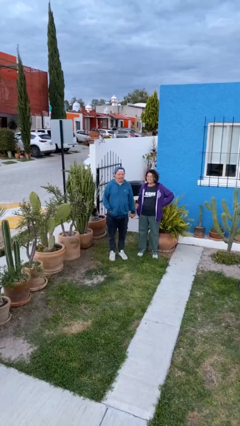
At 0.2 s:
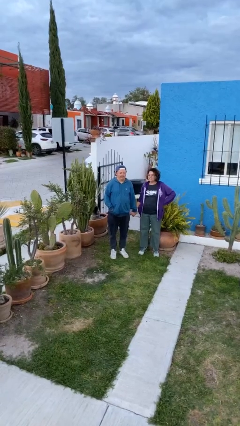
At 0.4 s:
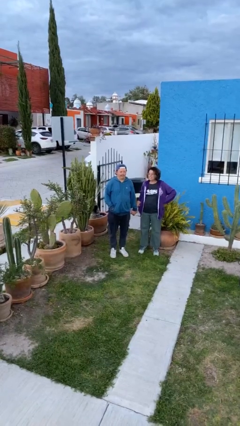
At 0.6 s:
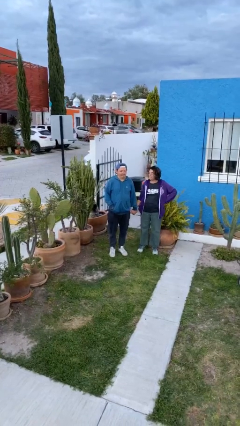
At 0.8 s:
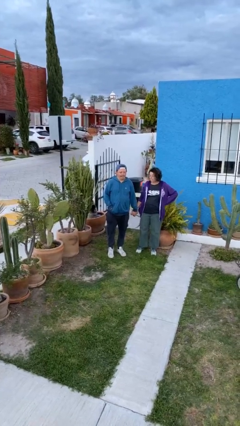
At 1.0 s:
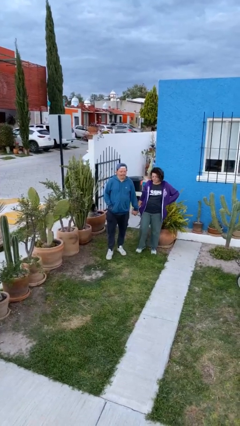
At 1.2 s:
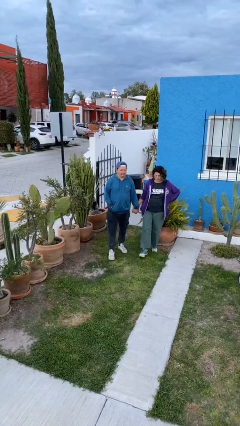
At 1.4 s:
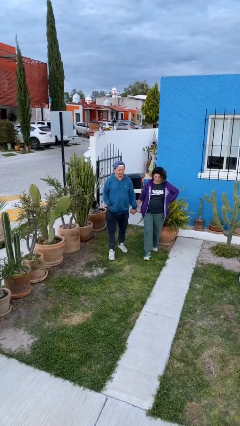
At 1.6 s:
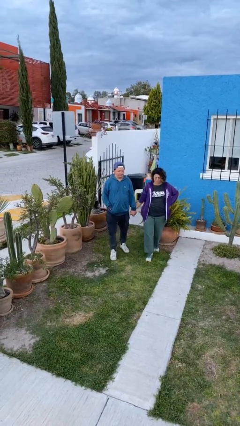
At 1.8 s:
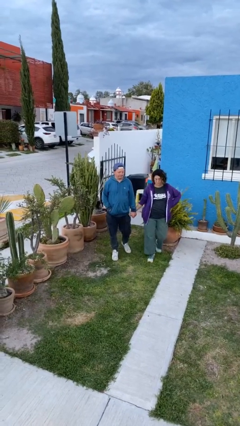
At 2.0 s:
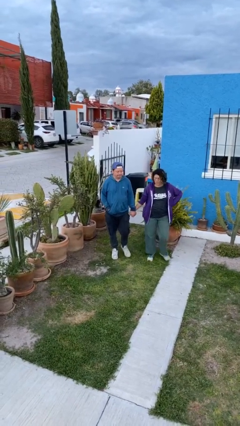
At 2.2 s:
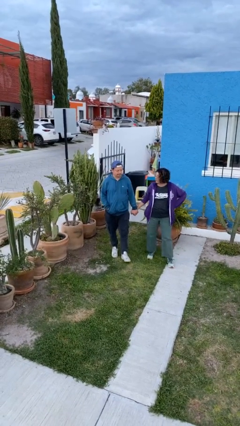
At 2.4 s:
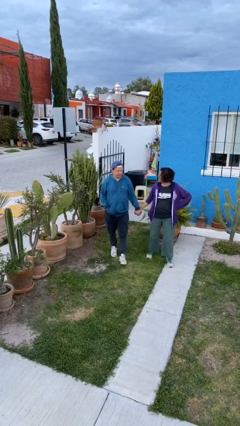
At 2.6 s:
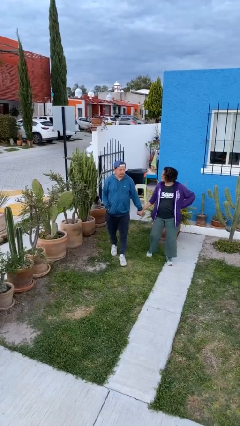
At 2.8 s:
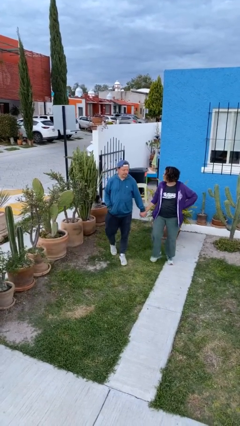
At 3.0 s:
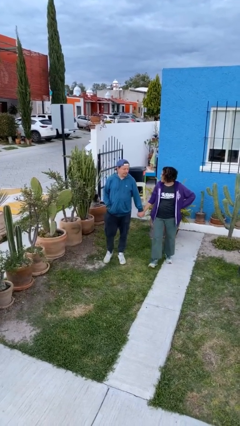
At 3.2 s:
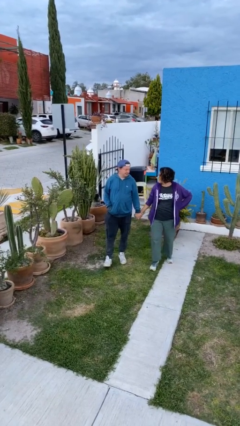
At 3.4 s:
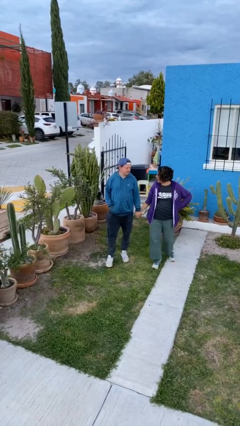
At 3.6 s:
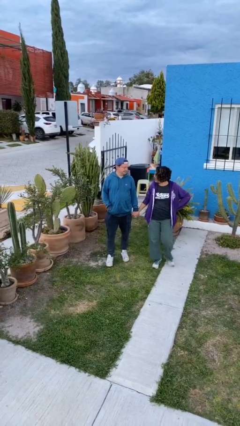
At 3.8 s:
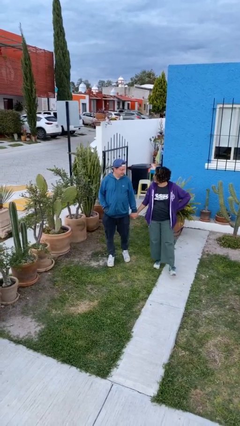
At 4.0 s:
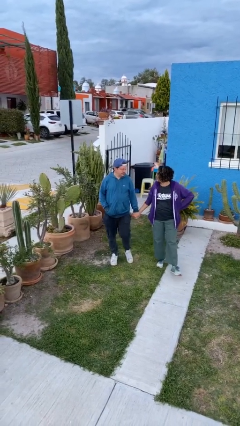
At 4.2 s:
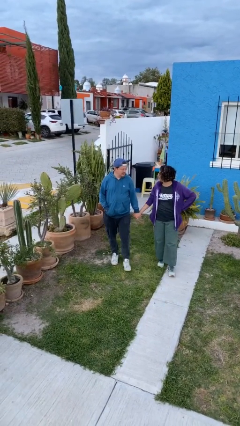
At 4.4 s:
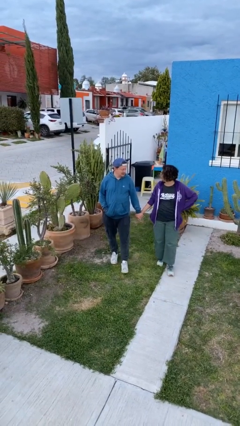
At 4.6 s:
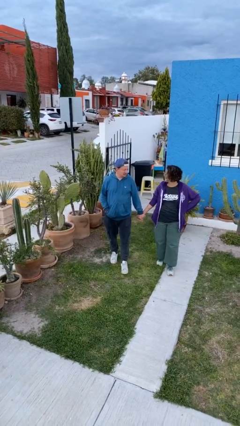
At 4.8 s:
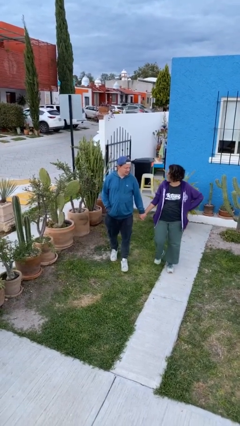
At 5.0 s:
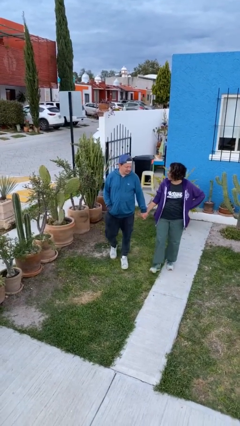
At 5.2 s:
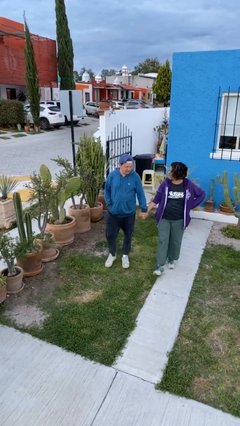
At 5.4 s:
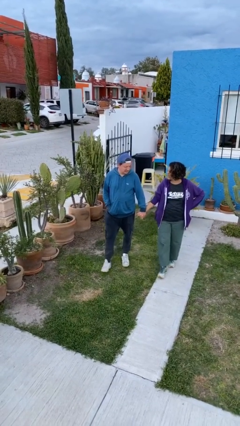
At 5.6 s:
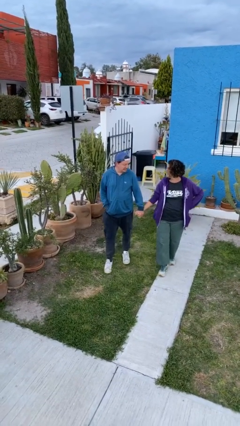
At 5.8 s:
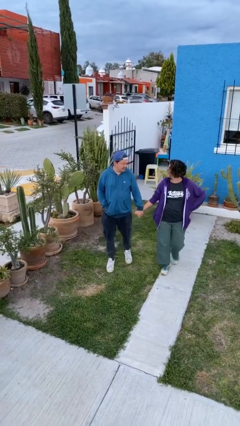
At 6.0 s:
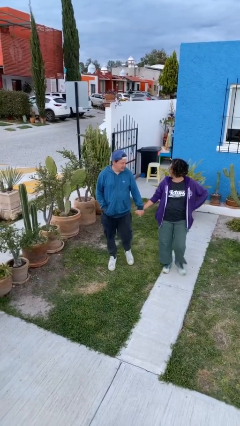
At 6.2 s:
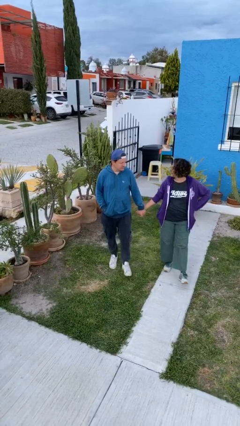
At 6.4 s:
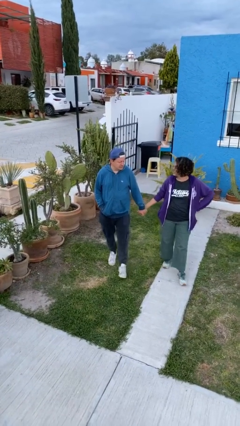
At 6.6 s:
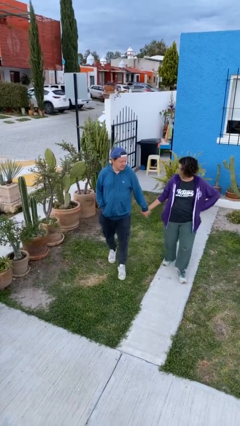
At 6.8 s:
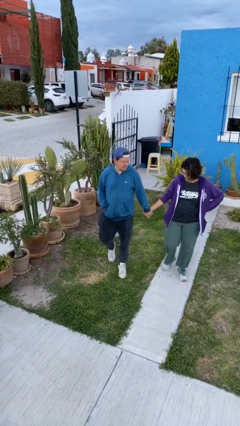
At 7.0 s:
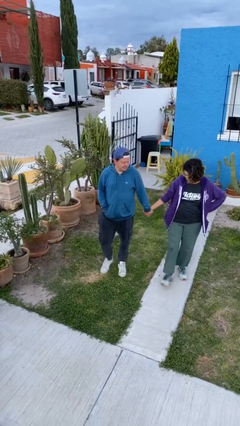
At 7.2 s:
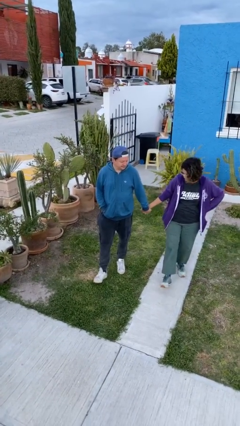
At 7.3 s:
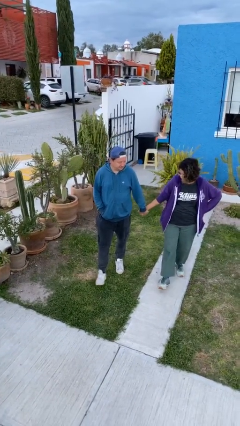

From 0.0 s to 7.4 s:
person holds hand

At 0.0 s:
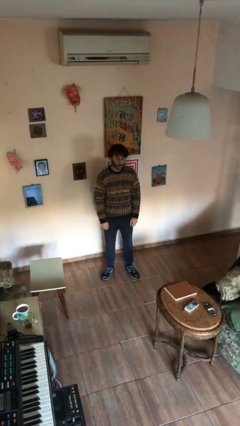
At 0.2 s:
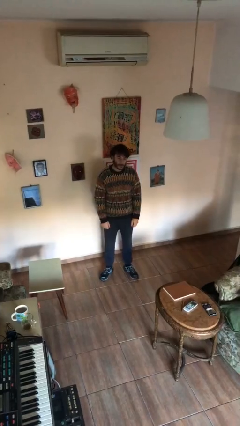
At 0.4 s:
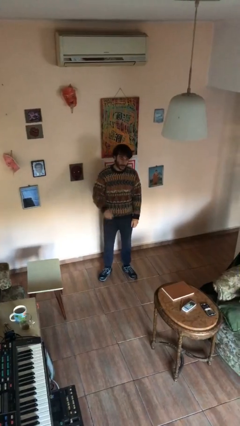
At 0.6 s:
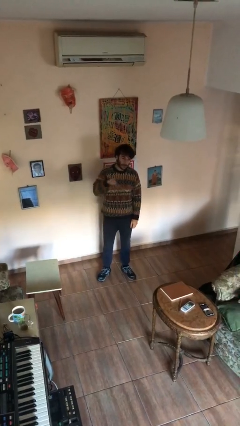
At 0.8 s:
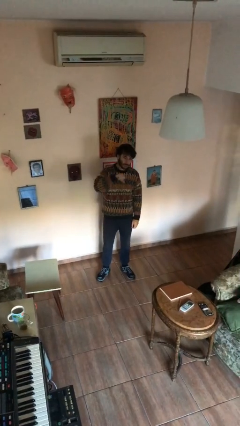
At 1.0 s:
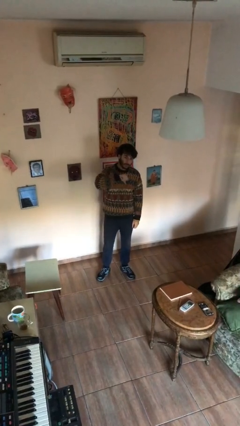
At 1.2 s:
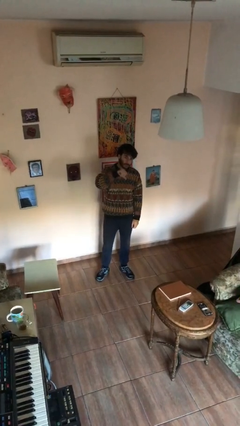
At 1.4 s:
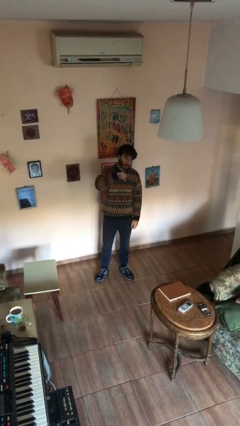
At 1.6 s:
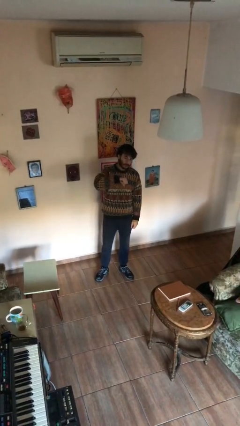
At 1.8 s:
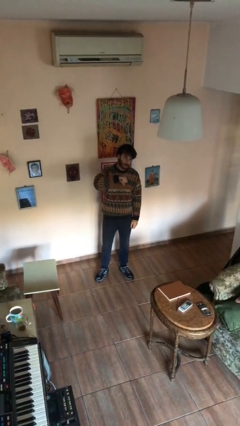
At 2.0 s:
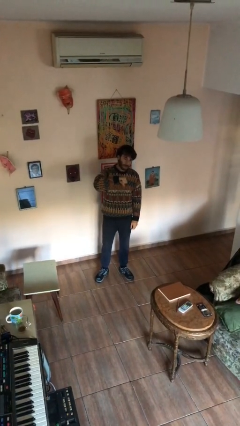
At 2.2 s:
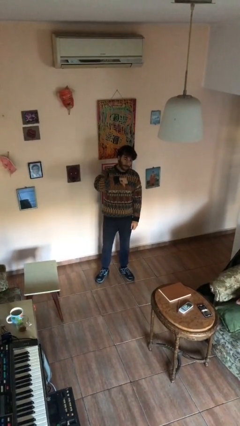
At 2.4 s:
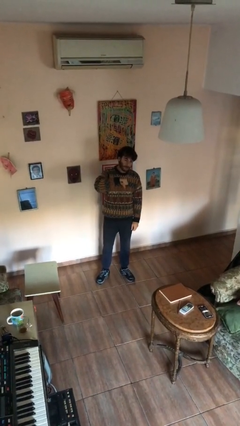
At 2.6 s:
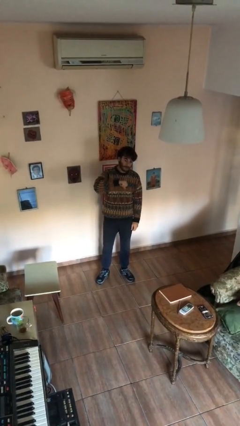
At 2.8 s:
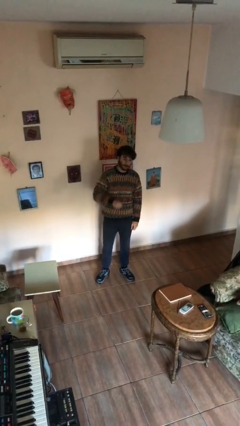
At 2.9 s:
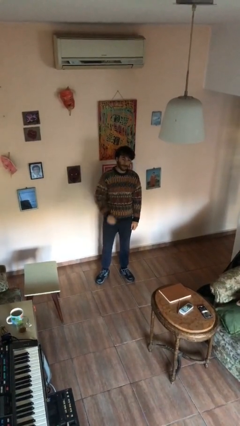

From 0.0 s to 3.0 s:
person gestures thumbs down

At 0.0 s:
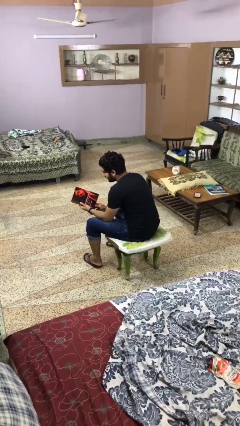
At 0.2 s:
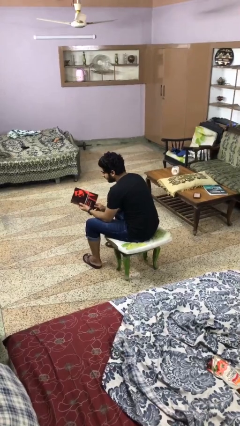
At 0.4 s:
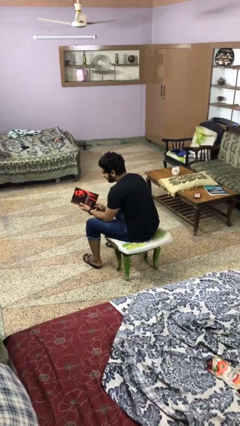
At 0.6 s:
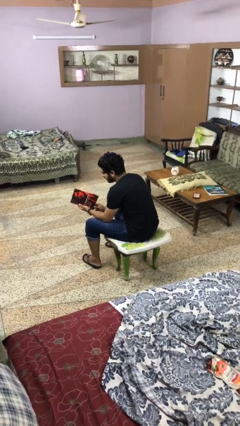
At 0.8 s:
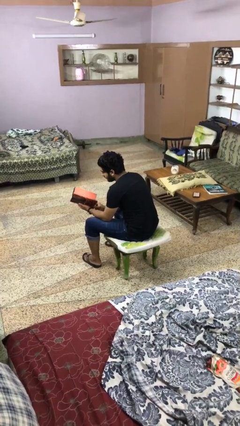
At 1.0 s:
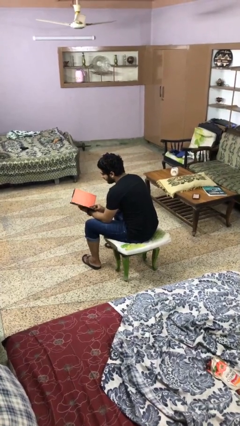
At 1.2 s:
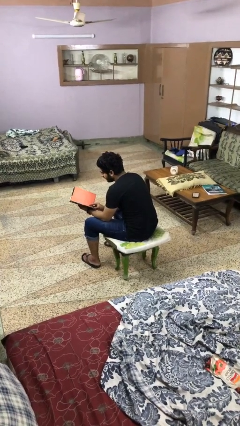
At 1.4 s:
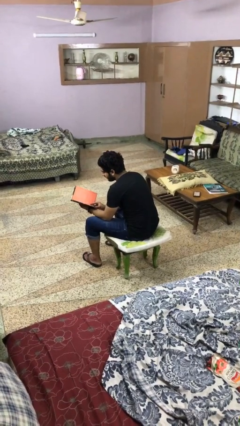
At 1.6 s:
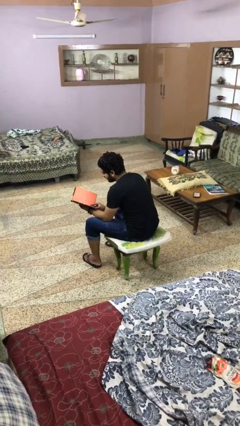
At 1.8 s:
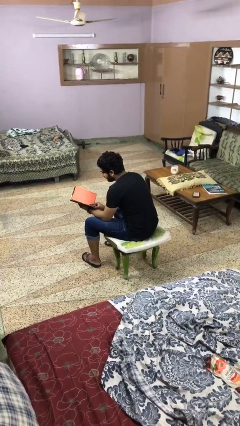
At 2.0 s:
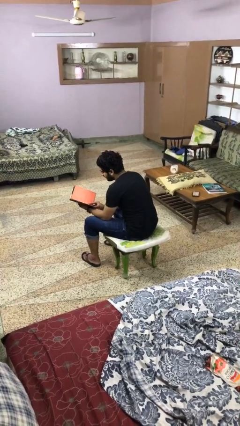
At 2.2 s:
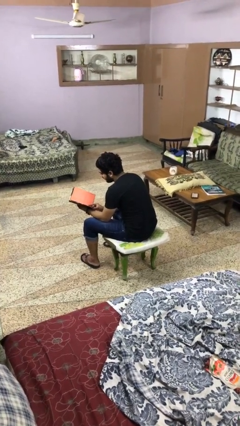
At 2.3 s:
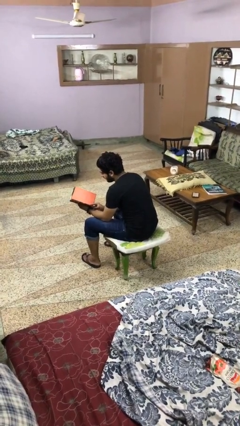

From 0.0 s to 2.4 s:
person reads magazine

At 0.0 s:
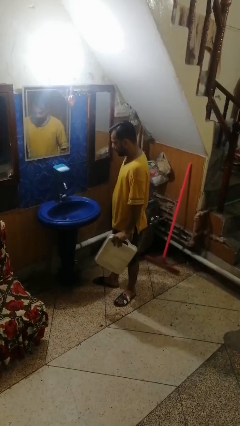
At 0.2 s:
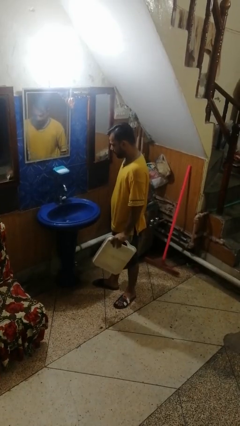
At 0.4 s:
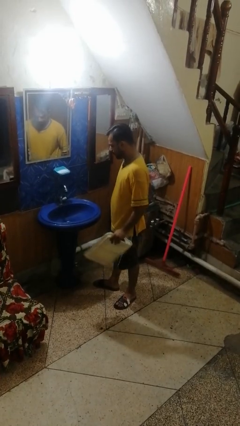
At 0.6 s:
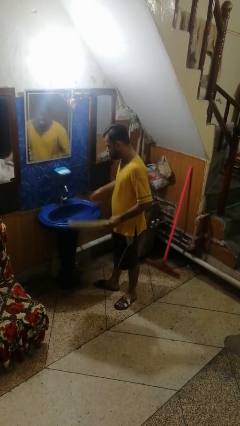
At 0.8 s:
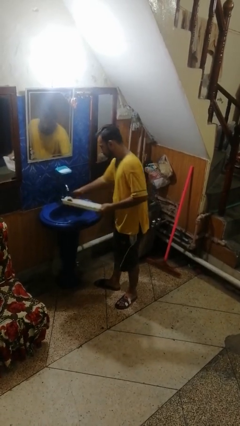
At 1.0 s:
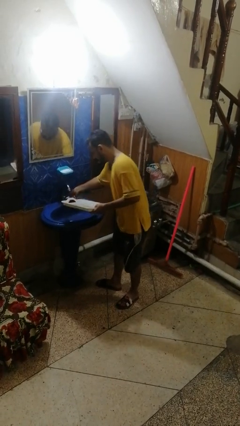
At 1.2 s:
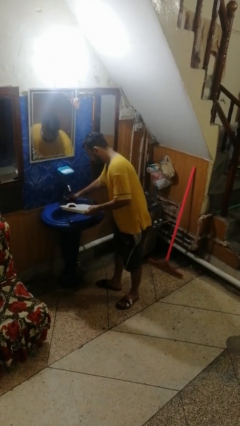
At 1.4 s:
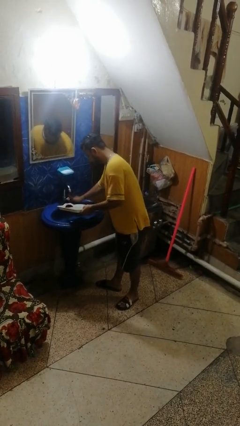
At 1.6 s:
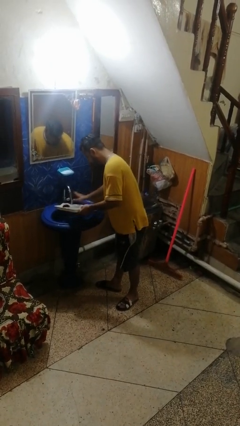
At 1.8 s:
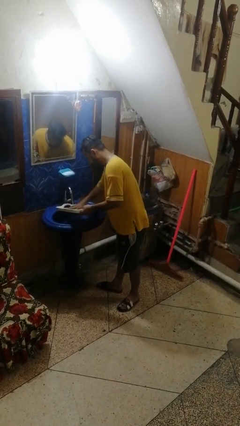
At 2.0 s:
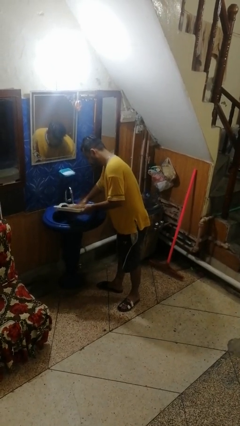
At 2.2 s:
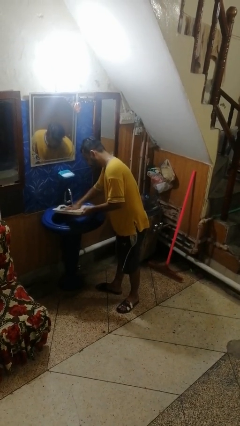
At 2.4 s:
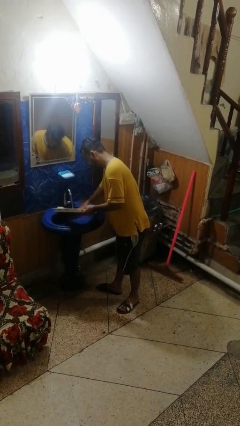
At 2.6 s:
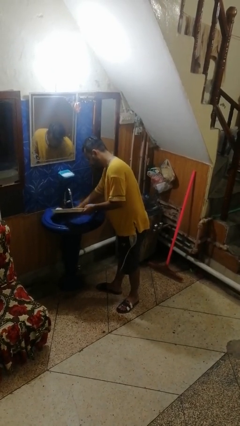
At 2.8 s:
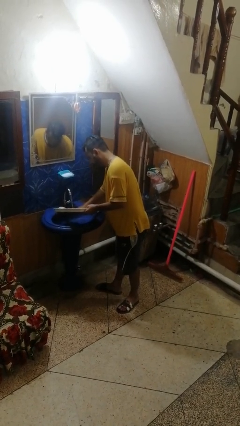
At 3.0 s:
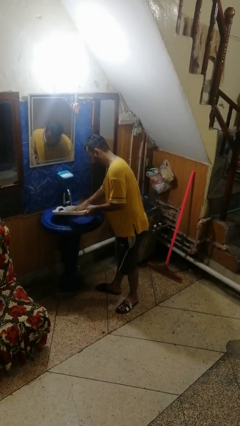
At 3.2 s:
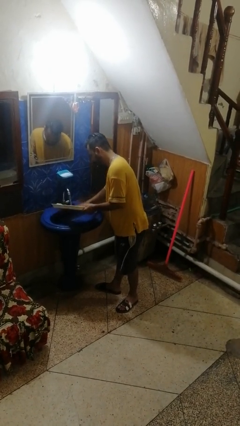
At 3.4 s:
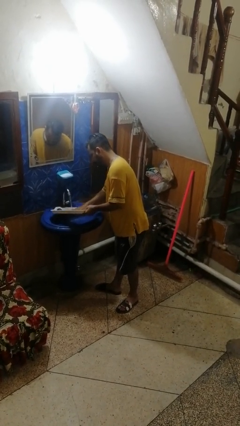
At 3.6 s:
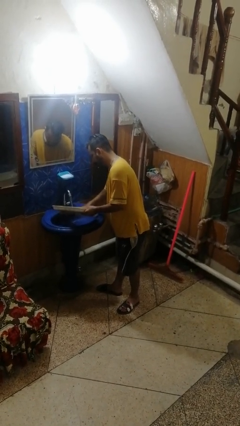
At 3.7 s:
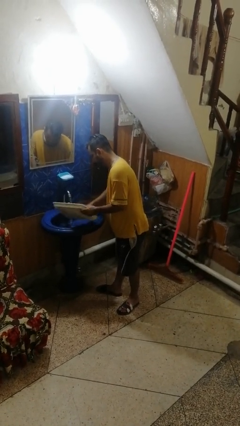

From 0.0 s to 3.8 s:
person washes dish

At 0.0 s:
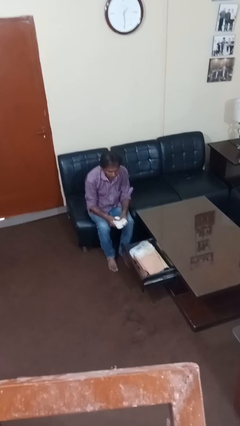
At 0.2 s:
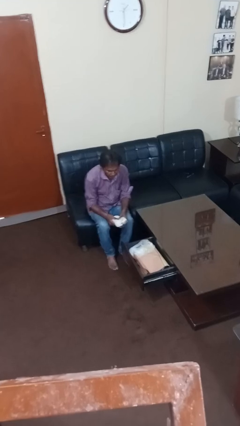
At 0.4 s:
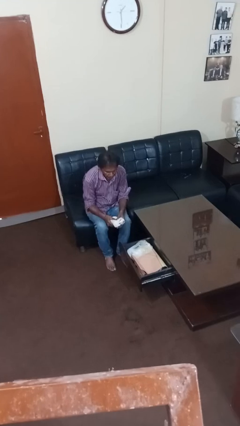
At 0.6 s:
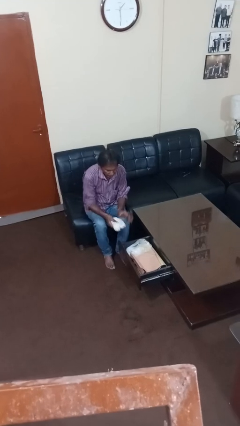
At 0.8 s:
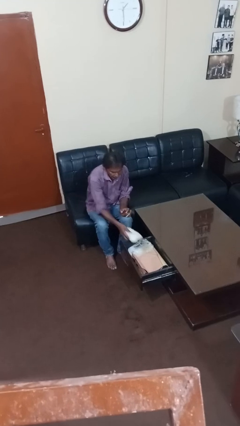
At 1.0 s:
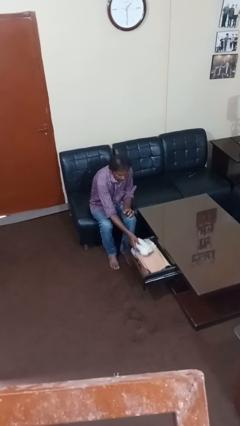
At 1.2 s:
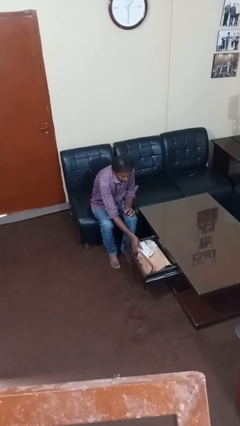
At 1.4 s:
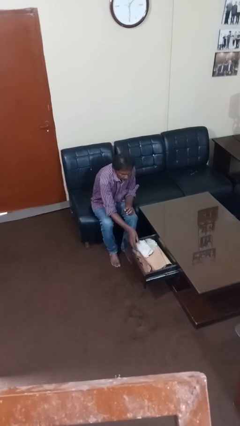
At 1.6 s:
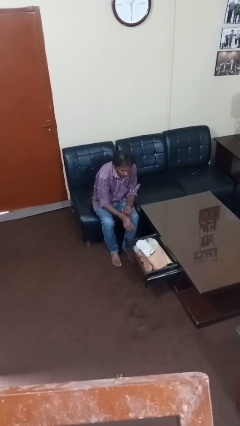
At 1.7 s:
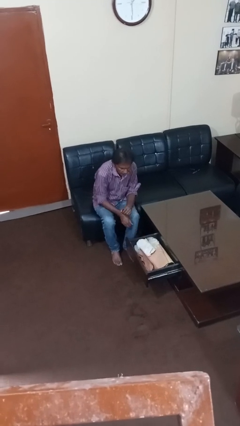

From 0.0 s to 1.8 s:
person puts clothes into dresser
